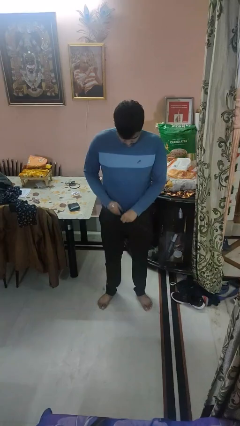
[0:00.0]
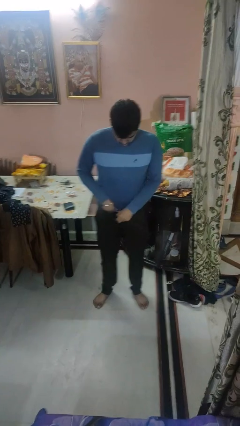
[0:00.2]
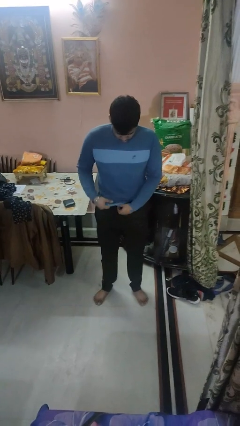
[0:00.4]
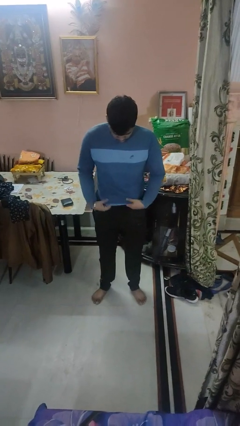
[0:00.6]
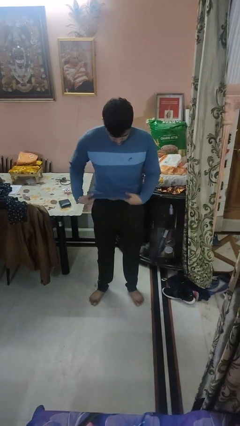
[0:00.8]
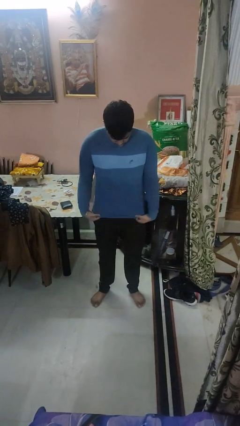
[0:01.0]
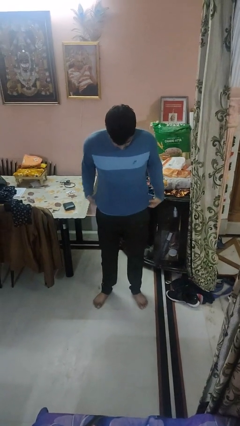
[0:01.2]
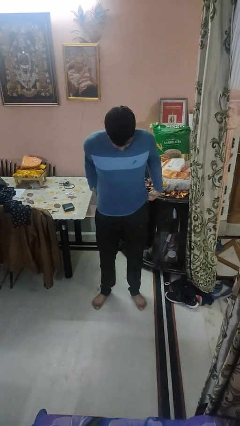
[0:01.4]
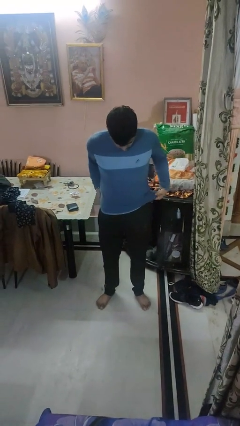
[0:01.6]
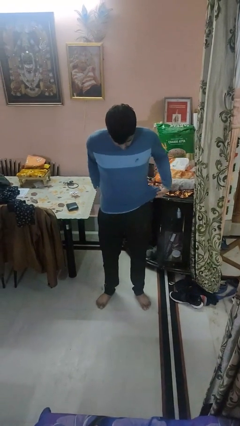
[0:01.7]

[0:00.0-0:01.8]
person untucks shirt

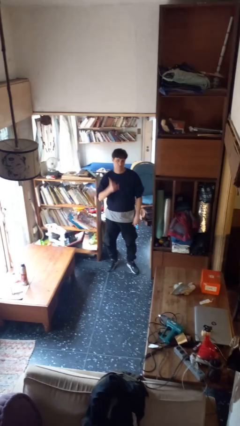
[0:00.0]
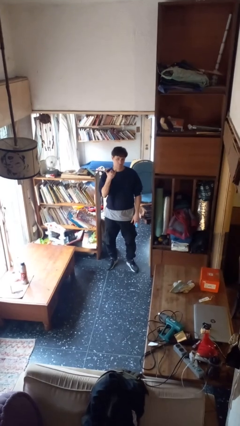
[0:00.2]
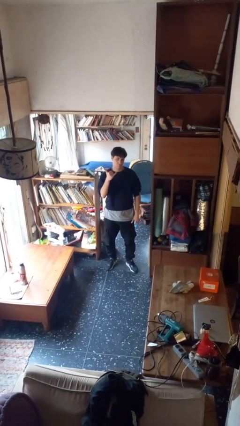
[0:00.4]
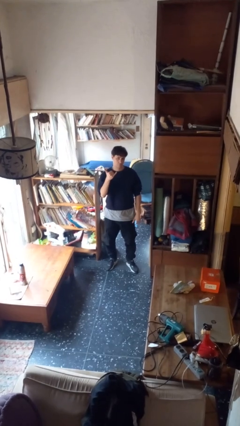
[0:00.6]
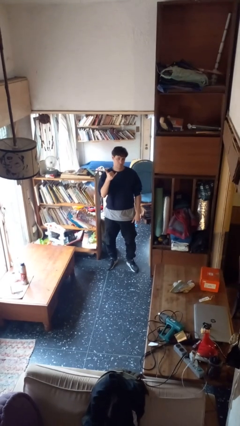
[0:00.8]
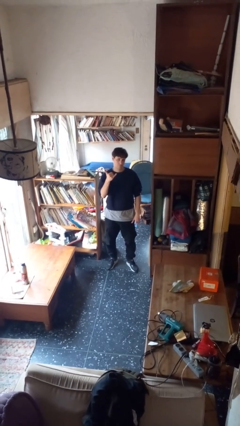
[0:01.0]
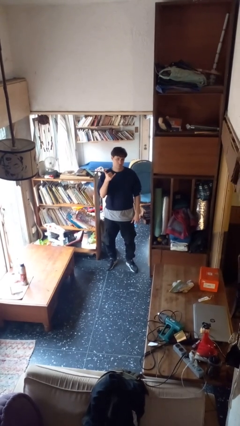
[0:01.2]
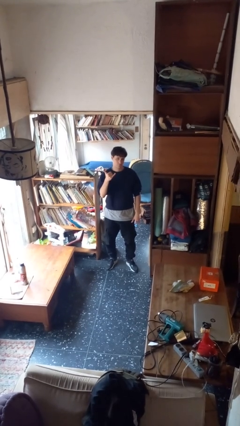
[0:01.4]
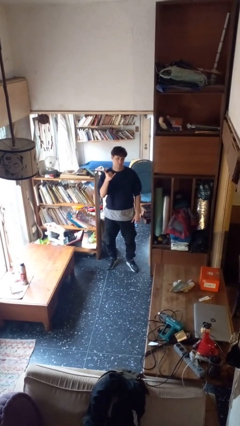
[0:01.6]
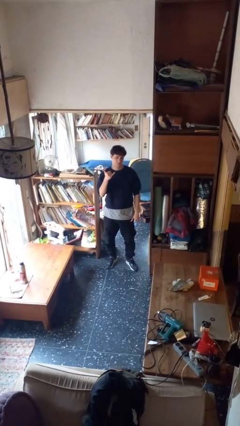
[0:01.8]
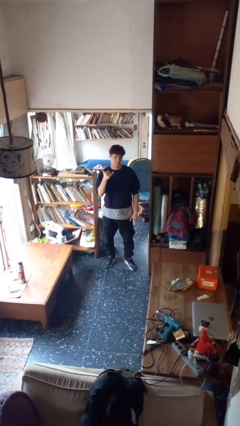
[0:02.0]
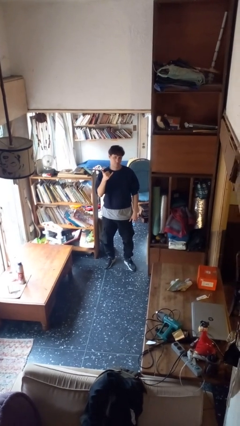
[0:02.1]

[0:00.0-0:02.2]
person gestures hang loose

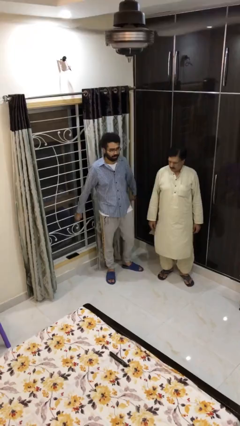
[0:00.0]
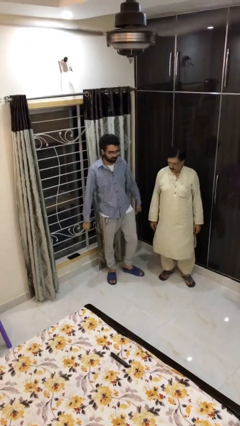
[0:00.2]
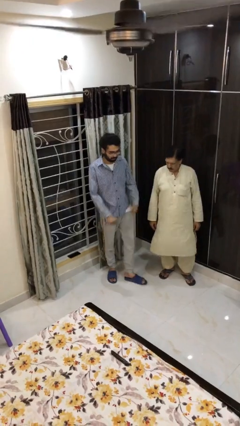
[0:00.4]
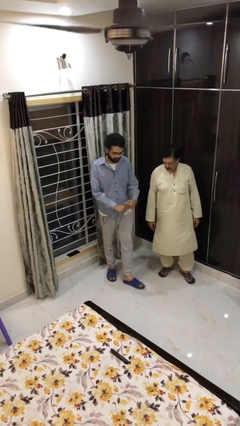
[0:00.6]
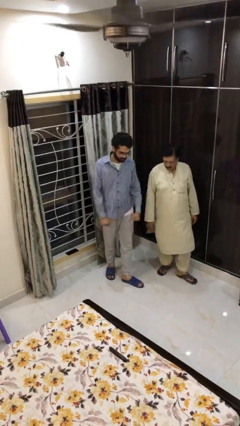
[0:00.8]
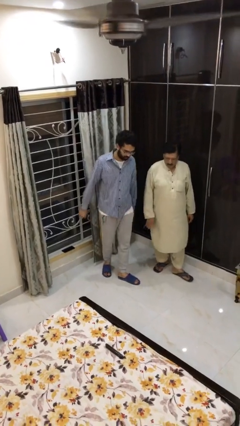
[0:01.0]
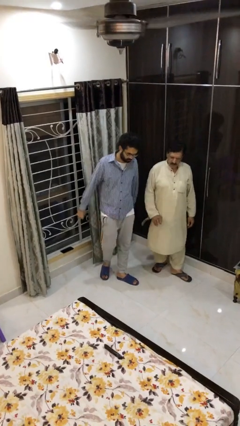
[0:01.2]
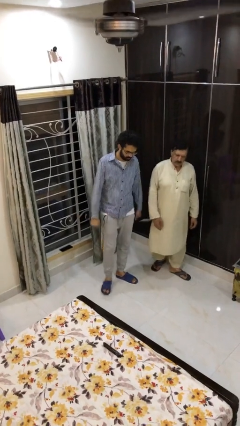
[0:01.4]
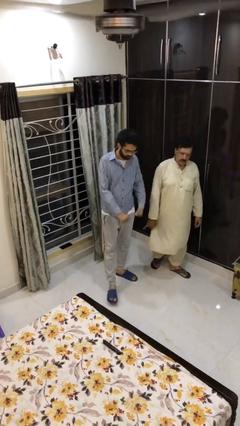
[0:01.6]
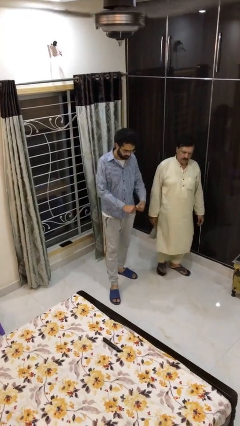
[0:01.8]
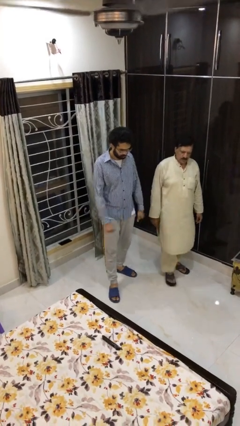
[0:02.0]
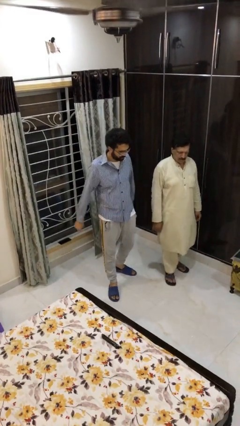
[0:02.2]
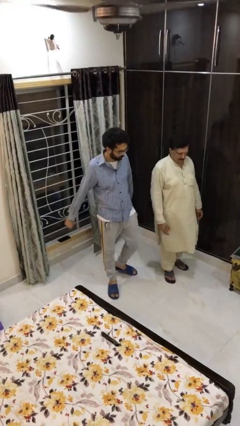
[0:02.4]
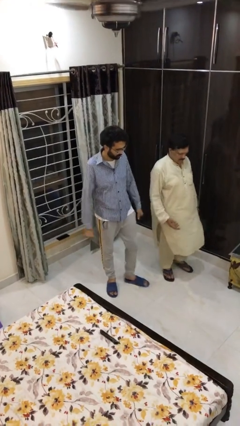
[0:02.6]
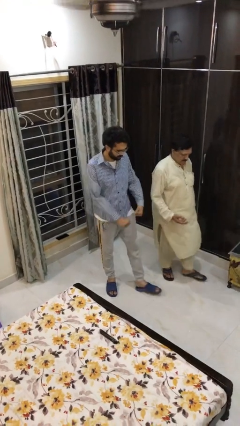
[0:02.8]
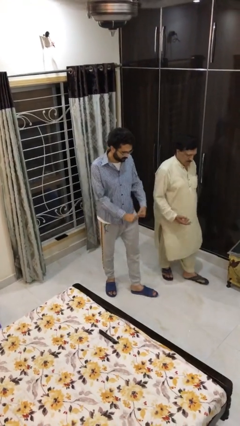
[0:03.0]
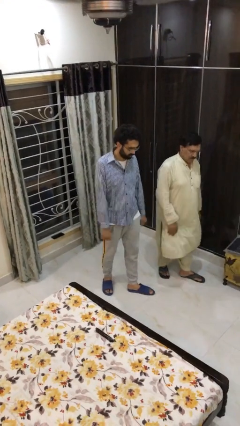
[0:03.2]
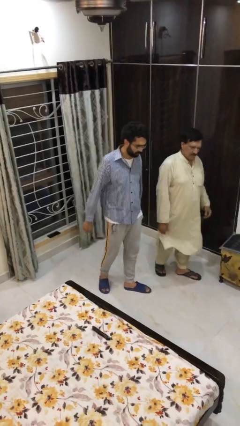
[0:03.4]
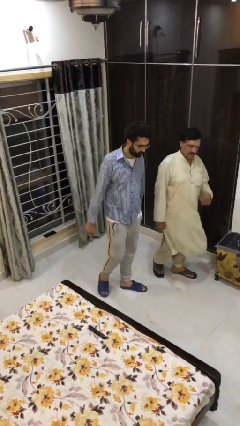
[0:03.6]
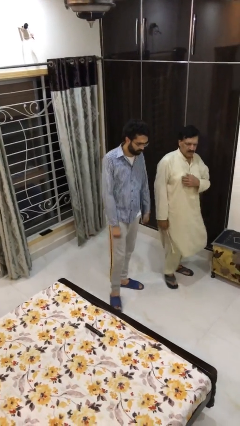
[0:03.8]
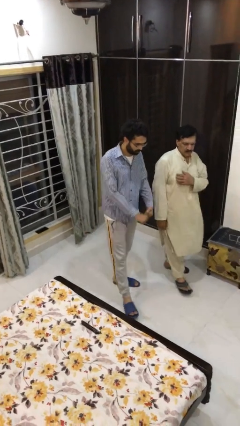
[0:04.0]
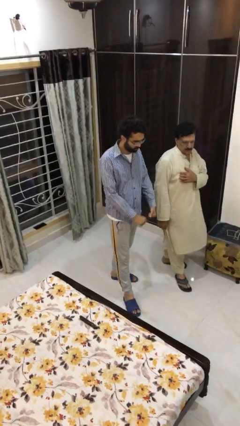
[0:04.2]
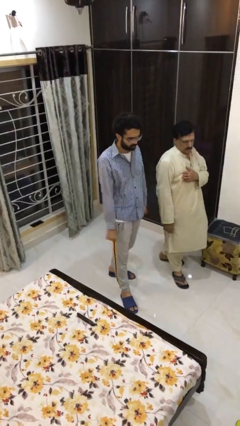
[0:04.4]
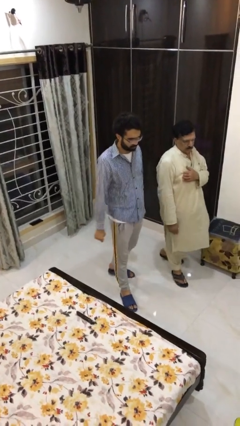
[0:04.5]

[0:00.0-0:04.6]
person talks to person

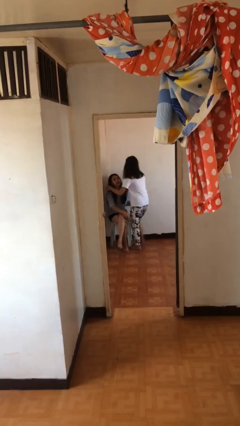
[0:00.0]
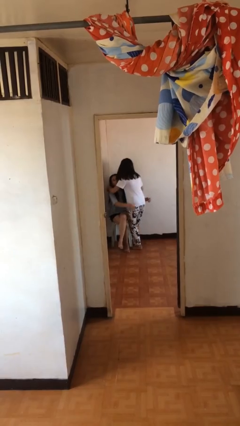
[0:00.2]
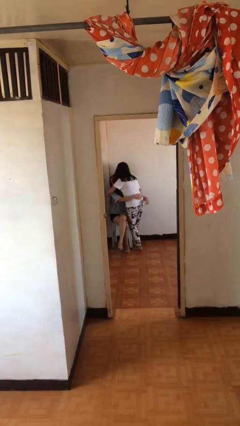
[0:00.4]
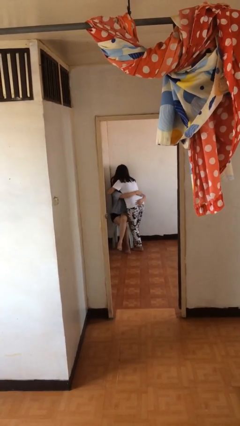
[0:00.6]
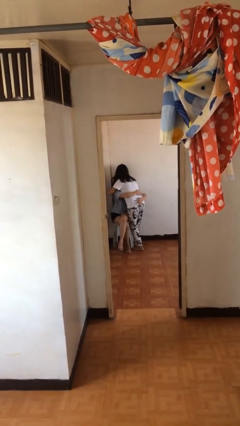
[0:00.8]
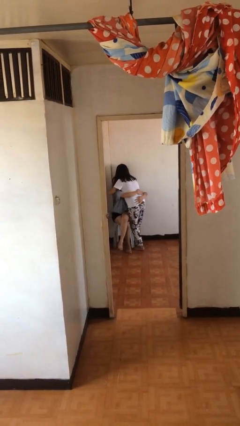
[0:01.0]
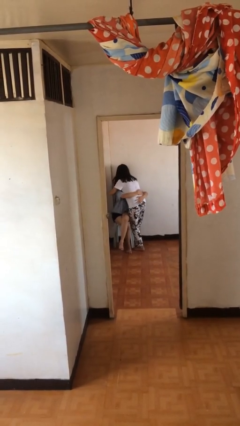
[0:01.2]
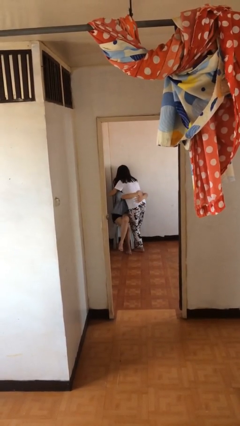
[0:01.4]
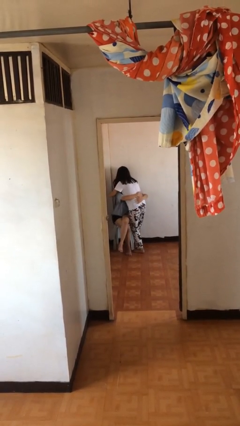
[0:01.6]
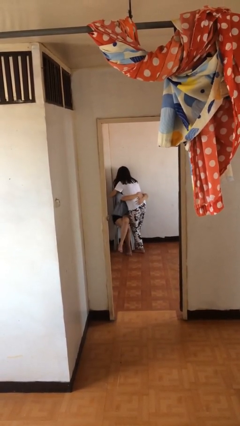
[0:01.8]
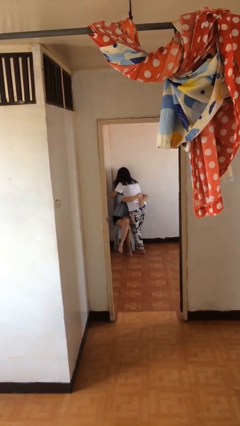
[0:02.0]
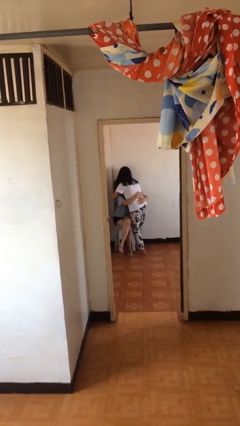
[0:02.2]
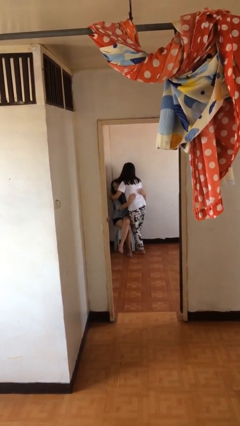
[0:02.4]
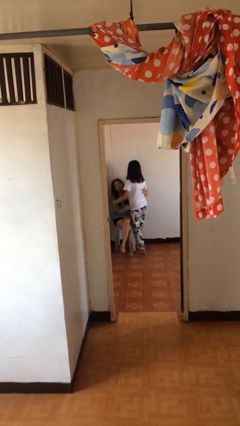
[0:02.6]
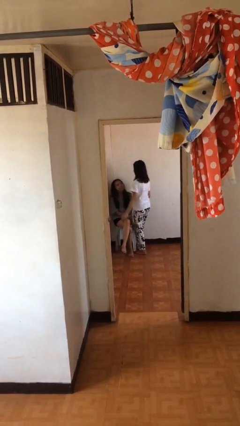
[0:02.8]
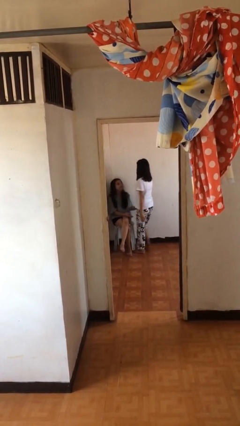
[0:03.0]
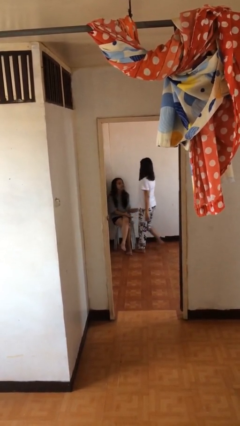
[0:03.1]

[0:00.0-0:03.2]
person embraces person

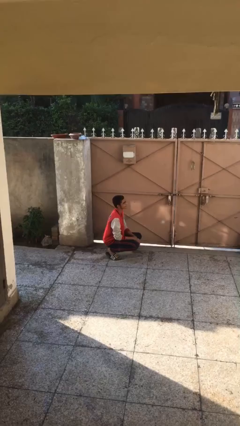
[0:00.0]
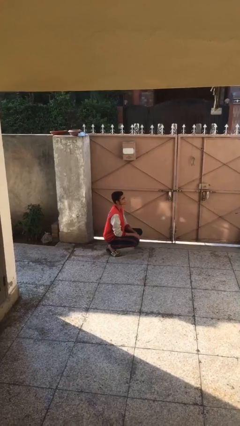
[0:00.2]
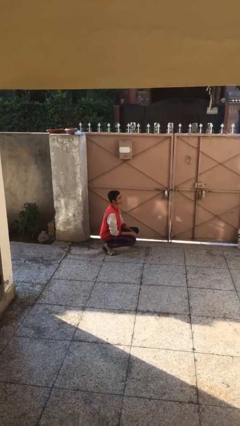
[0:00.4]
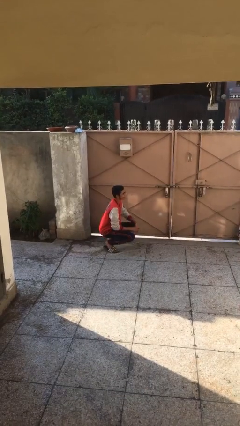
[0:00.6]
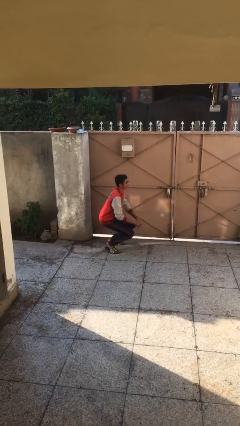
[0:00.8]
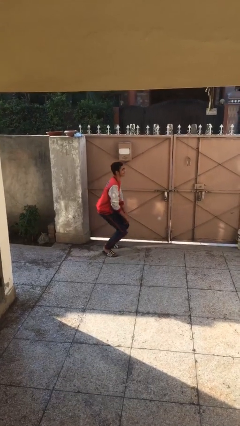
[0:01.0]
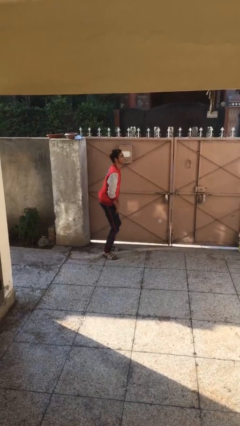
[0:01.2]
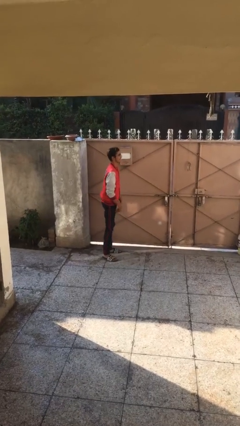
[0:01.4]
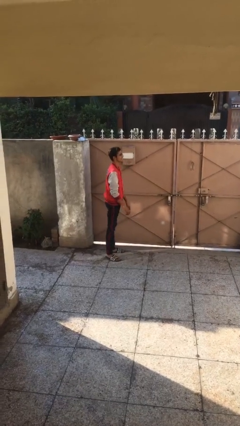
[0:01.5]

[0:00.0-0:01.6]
person stands up

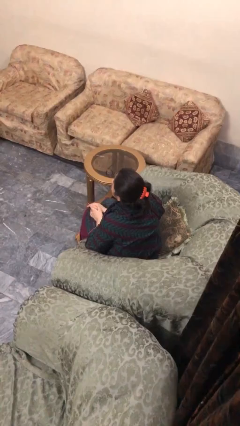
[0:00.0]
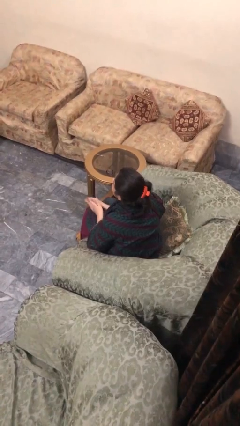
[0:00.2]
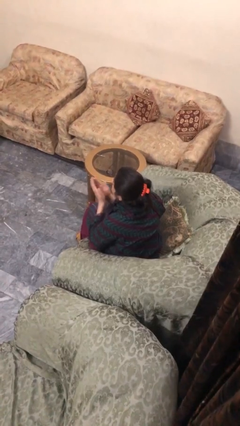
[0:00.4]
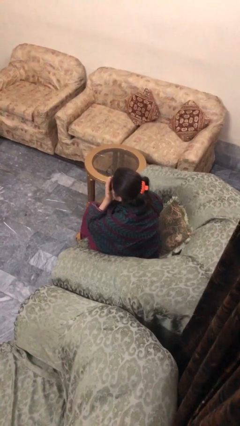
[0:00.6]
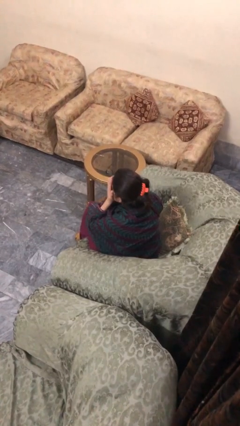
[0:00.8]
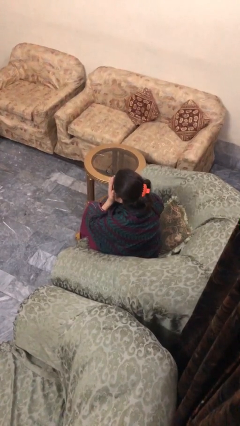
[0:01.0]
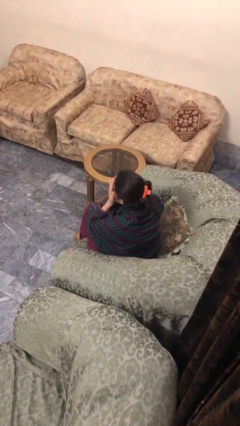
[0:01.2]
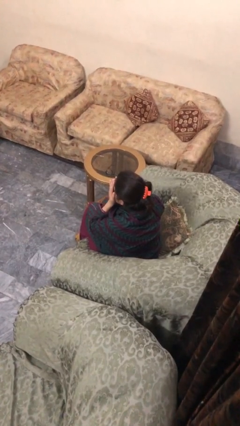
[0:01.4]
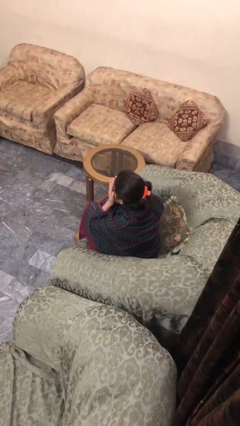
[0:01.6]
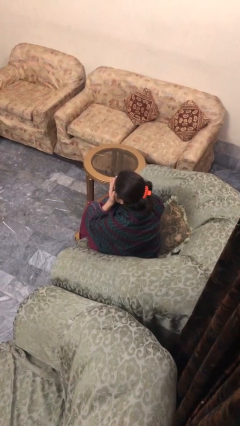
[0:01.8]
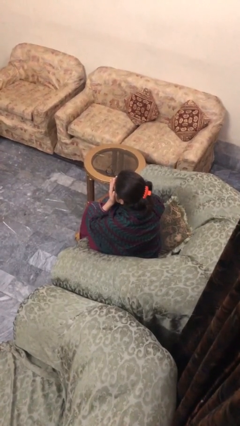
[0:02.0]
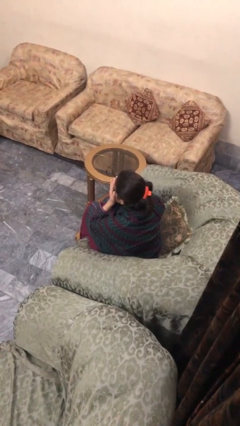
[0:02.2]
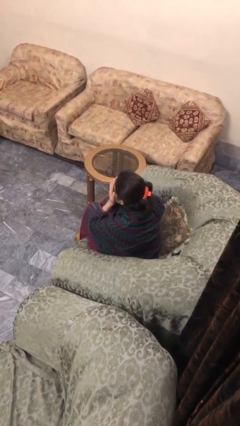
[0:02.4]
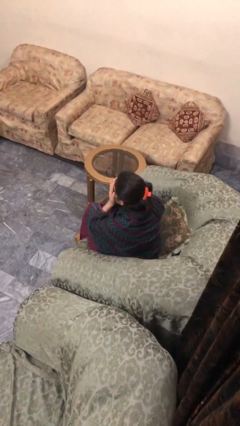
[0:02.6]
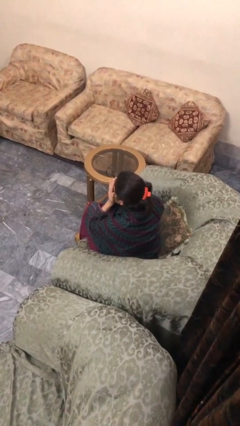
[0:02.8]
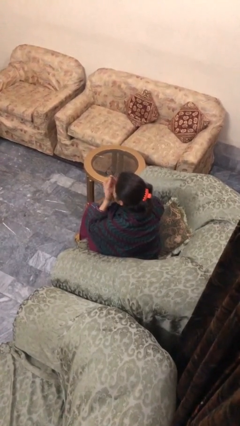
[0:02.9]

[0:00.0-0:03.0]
person covers face with hands

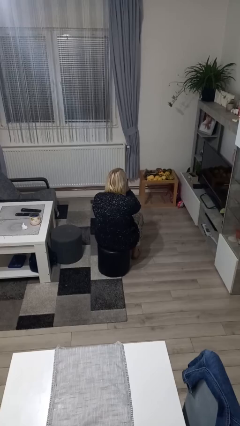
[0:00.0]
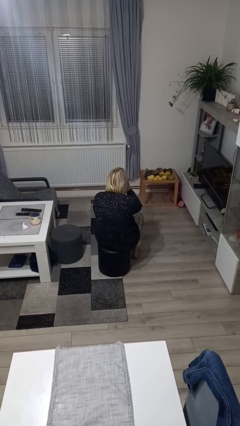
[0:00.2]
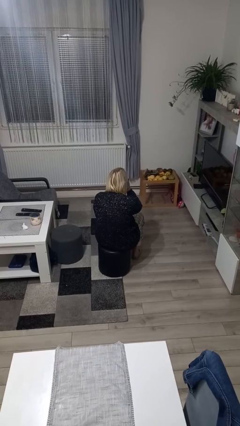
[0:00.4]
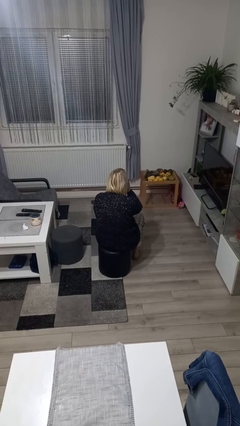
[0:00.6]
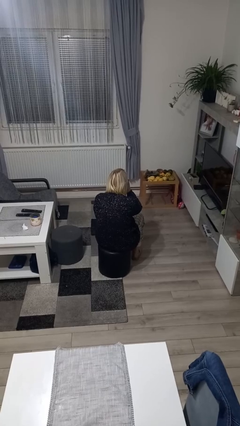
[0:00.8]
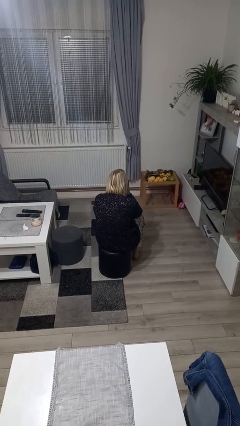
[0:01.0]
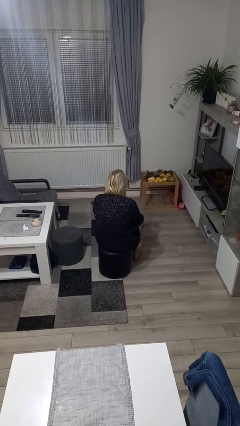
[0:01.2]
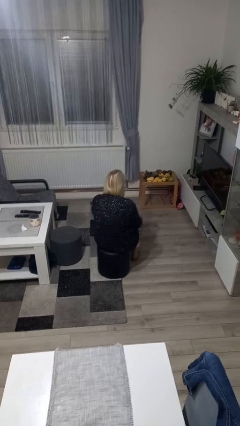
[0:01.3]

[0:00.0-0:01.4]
person gestures be quiet
